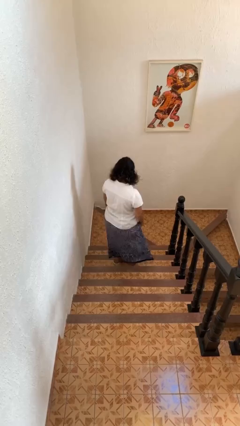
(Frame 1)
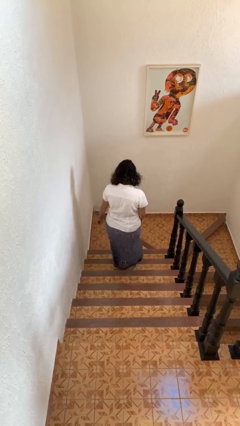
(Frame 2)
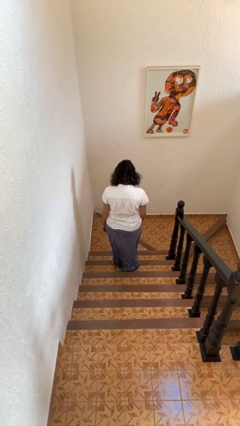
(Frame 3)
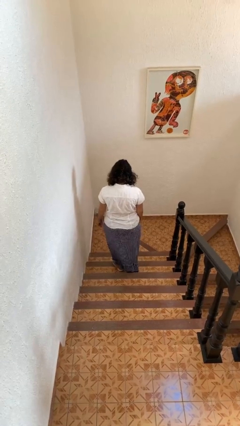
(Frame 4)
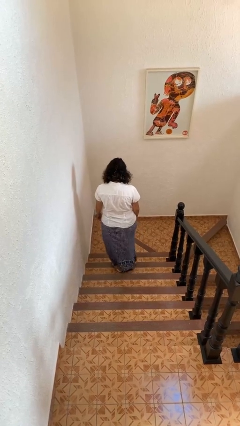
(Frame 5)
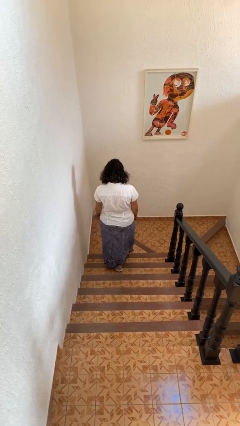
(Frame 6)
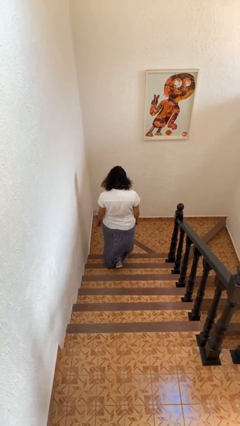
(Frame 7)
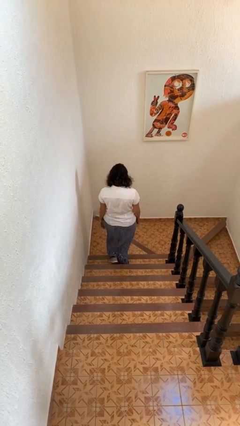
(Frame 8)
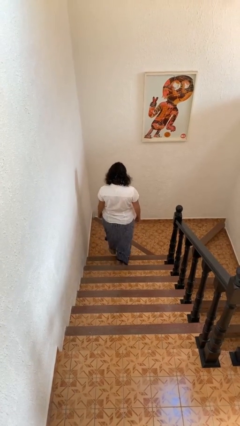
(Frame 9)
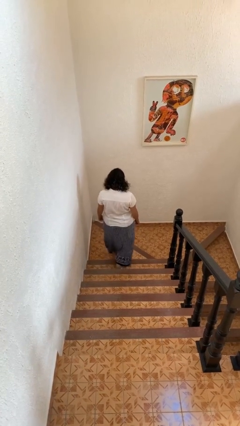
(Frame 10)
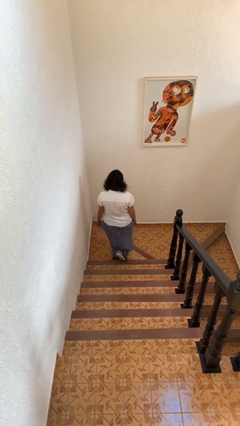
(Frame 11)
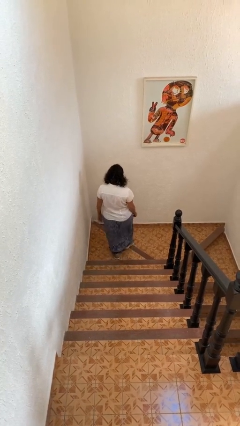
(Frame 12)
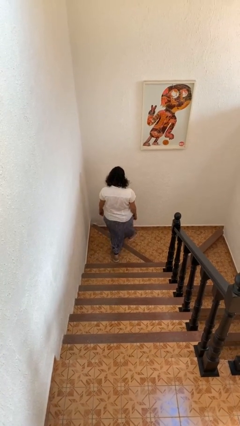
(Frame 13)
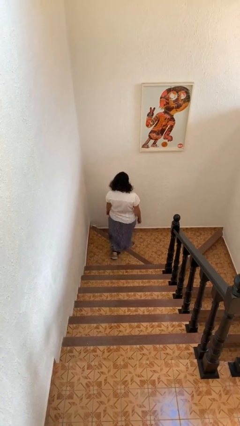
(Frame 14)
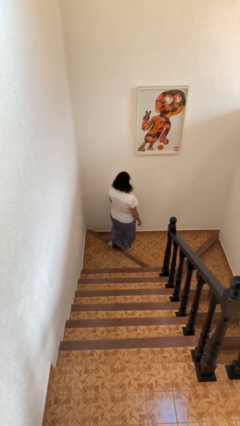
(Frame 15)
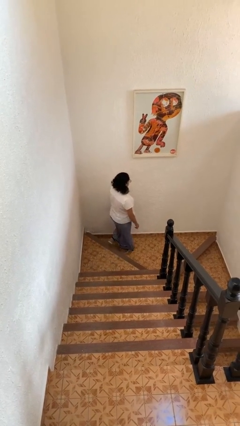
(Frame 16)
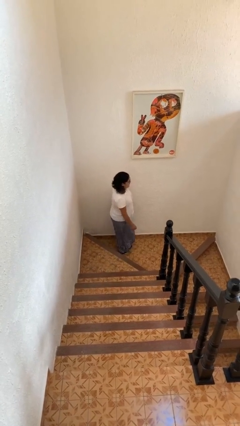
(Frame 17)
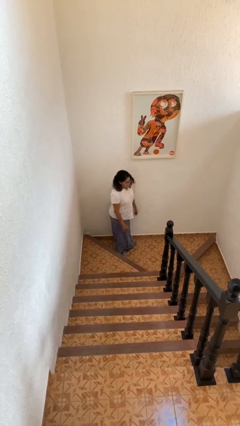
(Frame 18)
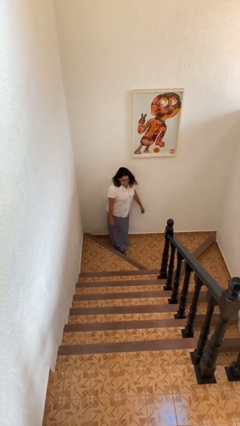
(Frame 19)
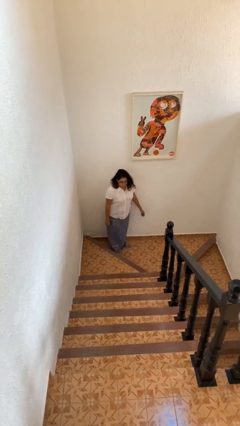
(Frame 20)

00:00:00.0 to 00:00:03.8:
person climbs down stairs

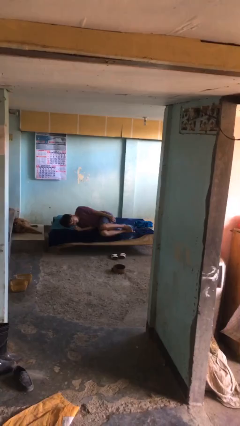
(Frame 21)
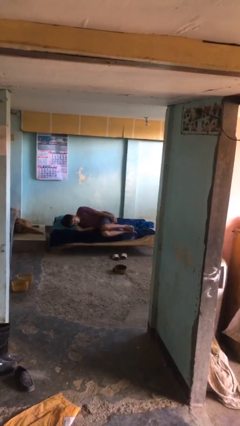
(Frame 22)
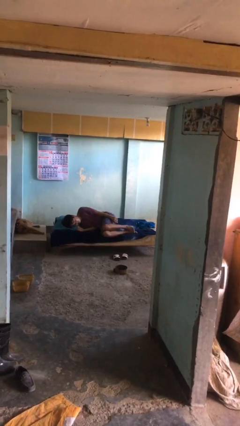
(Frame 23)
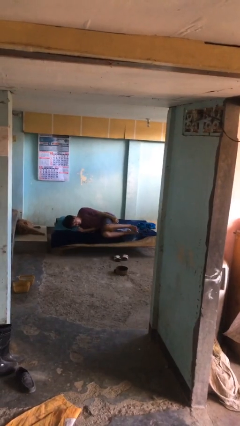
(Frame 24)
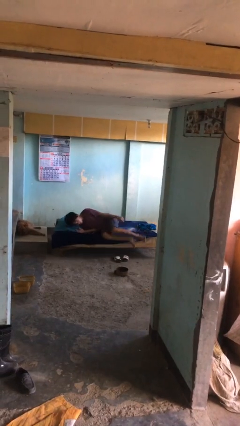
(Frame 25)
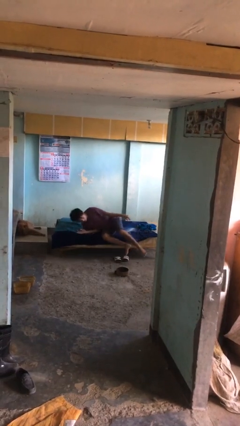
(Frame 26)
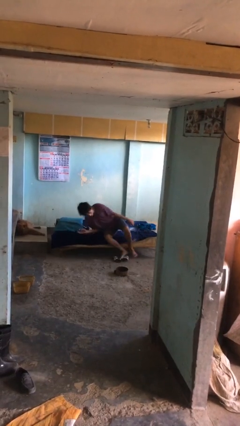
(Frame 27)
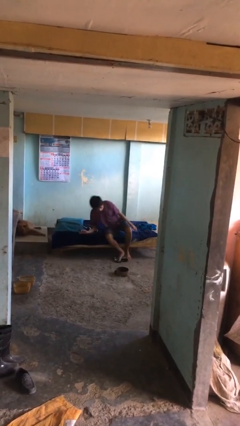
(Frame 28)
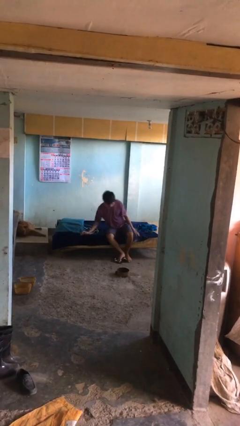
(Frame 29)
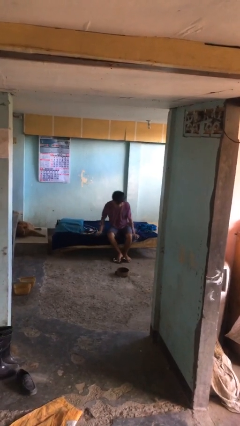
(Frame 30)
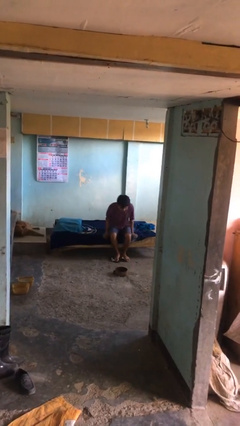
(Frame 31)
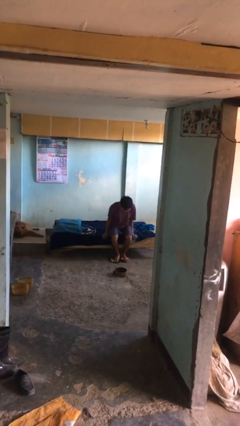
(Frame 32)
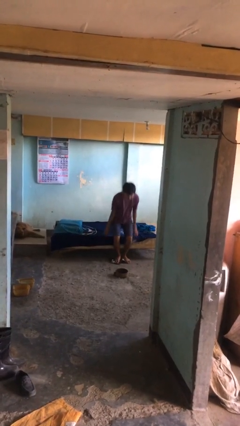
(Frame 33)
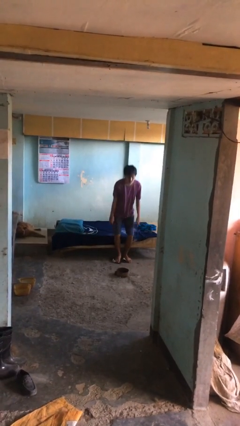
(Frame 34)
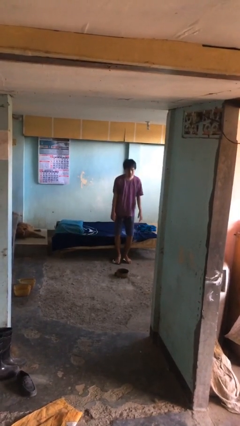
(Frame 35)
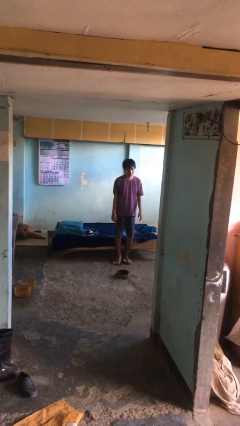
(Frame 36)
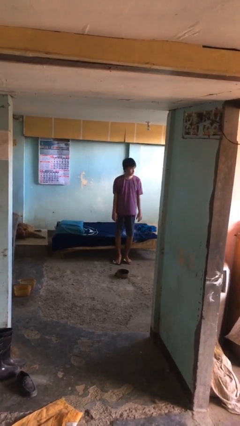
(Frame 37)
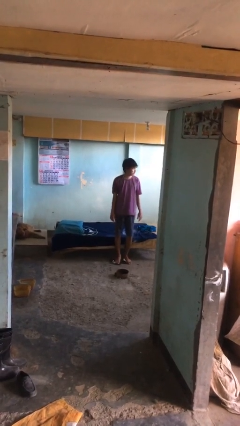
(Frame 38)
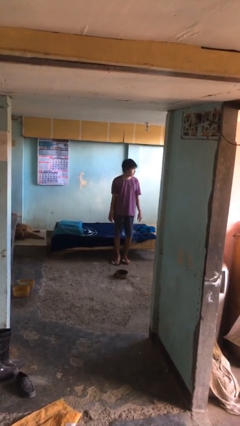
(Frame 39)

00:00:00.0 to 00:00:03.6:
person stands up

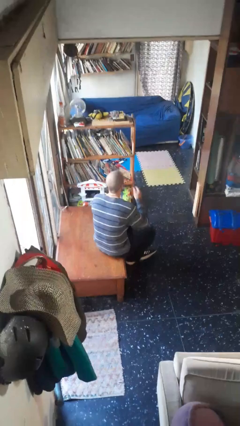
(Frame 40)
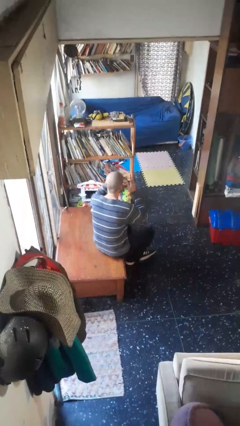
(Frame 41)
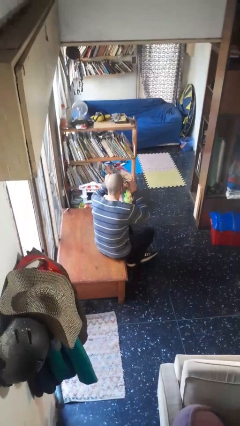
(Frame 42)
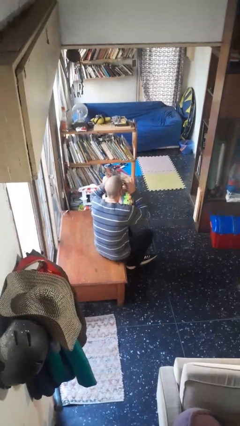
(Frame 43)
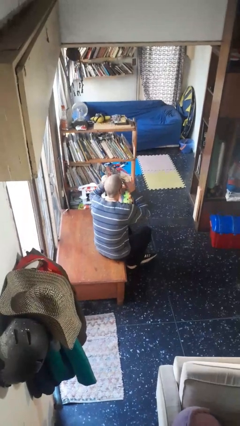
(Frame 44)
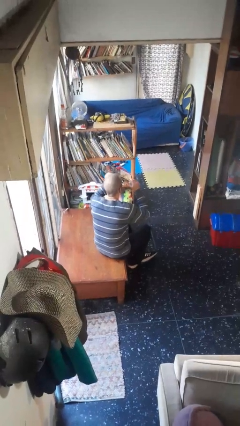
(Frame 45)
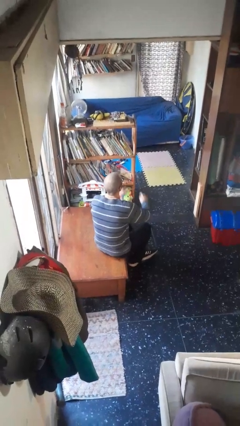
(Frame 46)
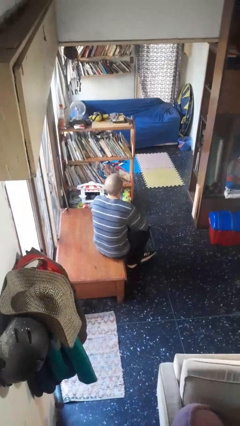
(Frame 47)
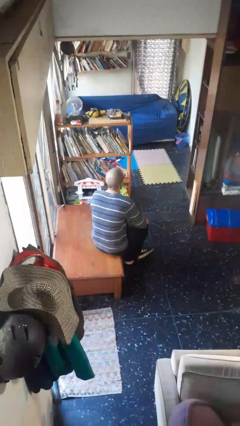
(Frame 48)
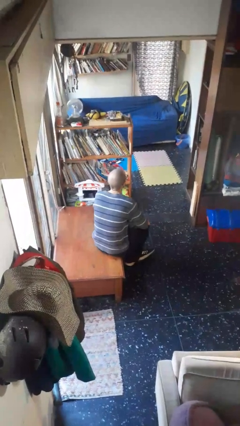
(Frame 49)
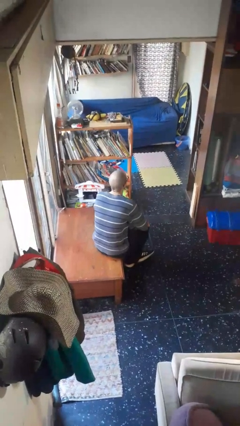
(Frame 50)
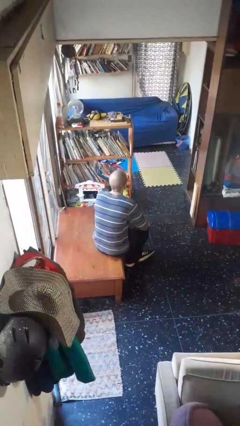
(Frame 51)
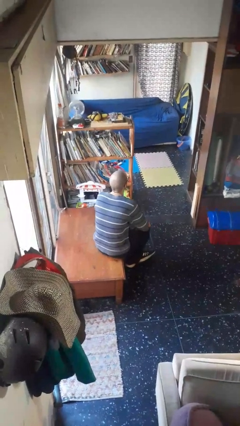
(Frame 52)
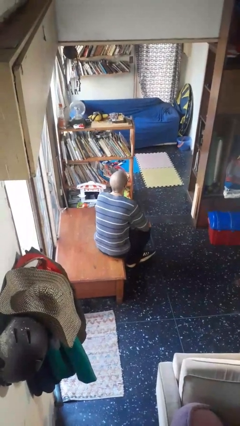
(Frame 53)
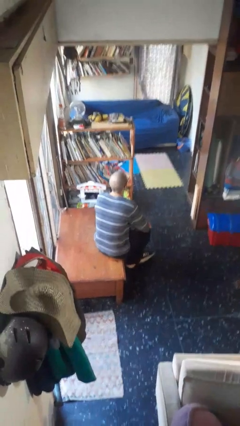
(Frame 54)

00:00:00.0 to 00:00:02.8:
person puts on glasses

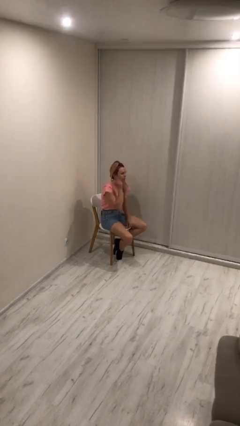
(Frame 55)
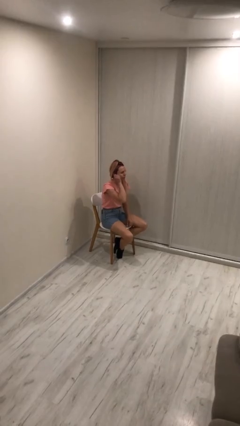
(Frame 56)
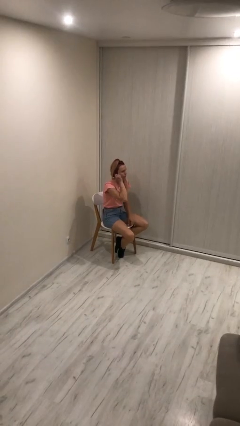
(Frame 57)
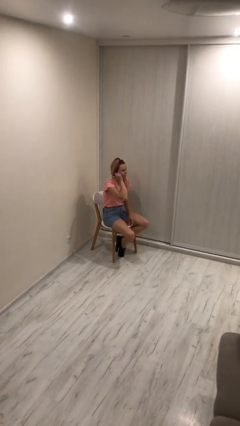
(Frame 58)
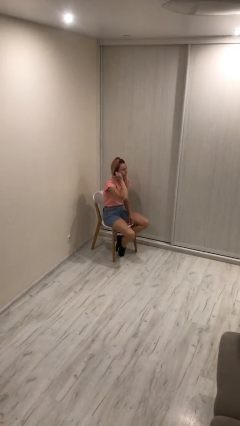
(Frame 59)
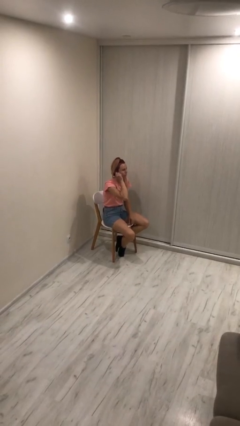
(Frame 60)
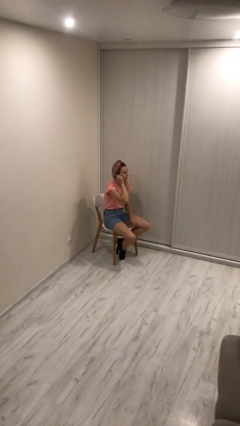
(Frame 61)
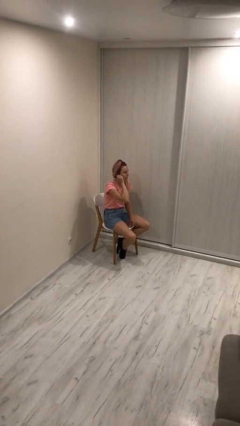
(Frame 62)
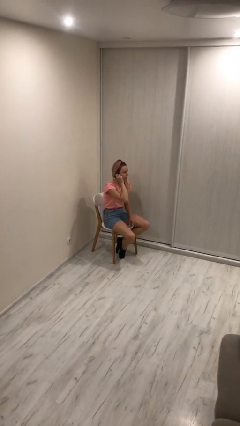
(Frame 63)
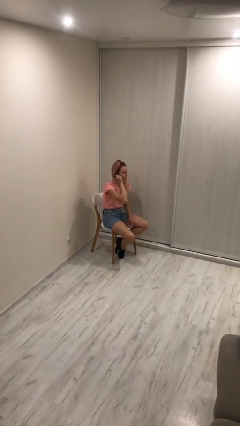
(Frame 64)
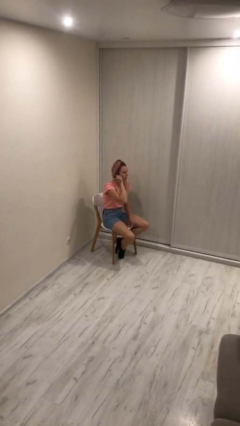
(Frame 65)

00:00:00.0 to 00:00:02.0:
person touches earlobe

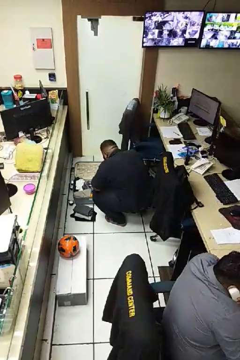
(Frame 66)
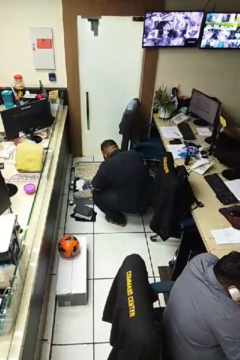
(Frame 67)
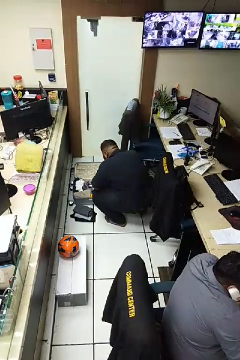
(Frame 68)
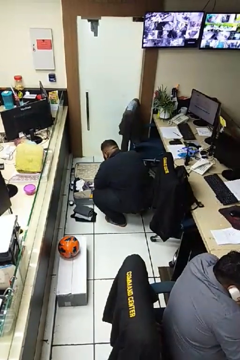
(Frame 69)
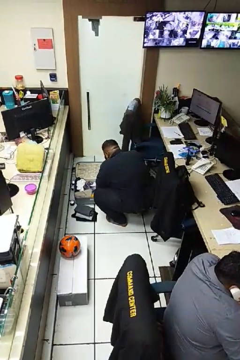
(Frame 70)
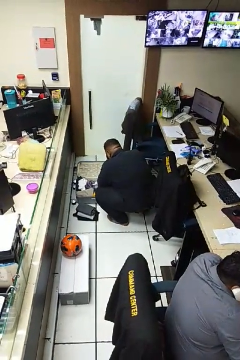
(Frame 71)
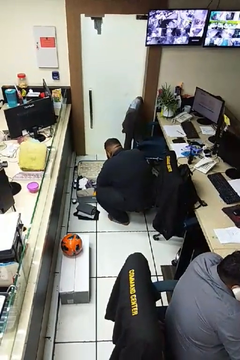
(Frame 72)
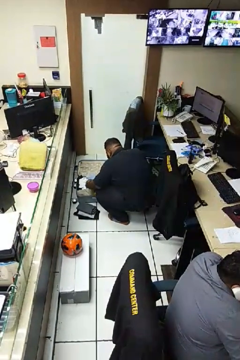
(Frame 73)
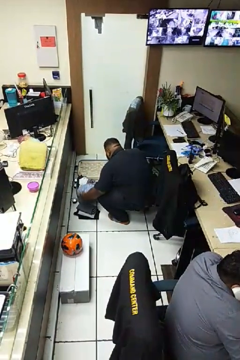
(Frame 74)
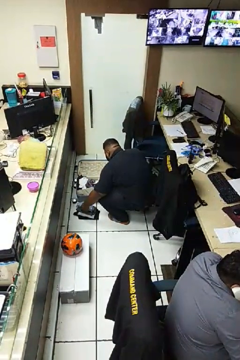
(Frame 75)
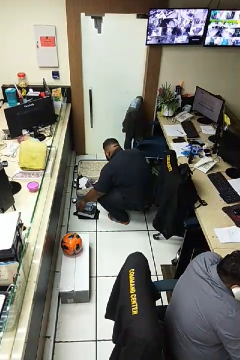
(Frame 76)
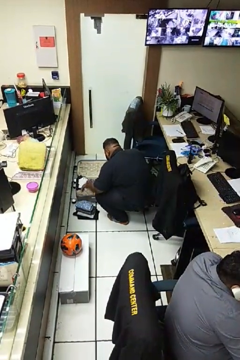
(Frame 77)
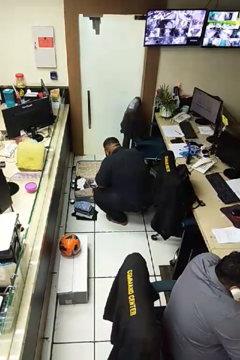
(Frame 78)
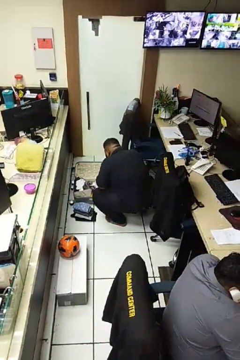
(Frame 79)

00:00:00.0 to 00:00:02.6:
person unloads clothes from suitcase

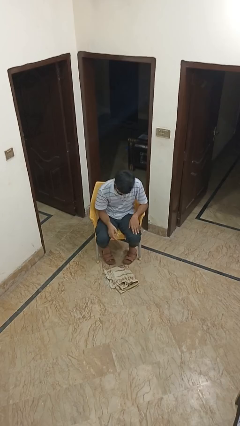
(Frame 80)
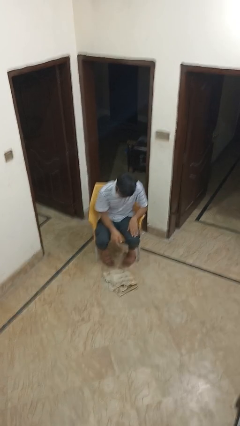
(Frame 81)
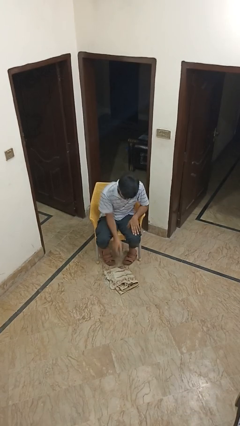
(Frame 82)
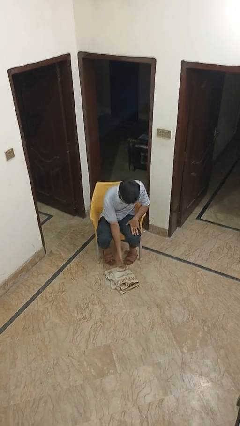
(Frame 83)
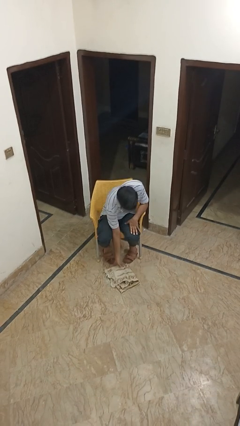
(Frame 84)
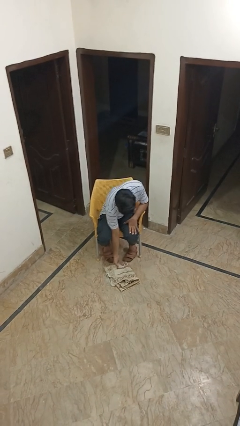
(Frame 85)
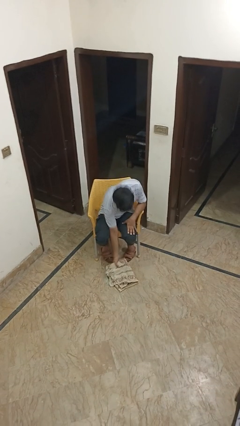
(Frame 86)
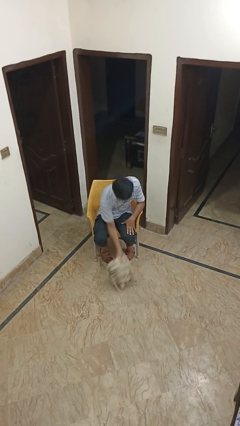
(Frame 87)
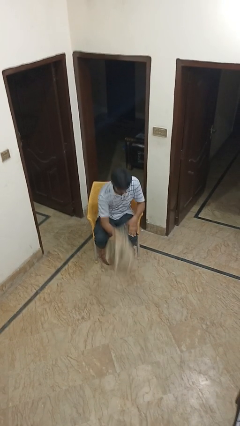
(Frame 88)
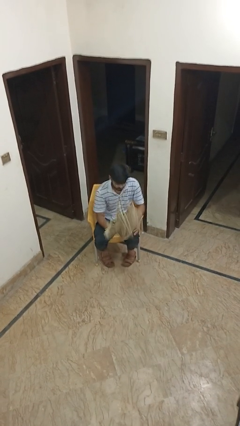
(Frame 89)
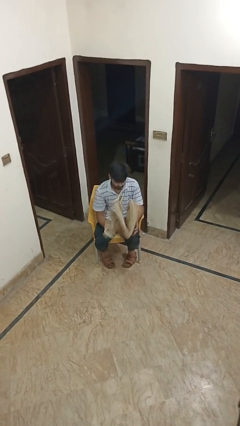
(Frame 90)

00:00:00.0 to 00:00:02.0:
person picks up object from floor

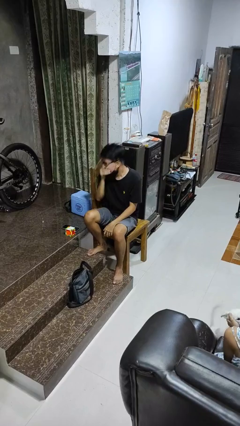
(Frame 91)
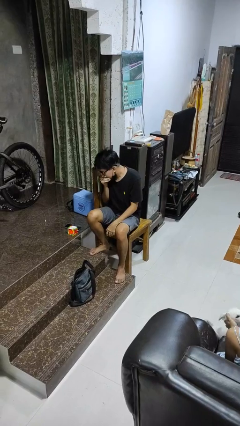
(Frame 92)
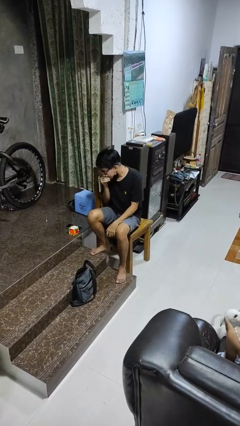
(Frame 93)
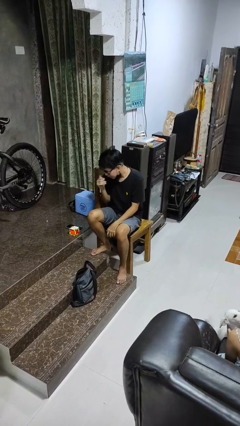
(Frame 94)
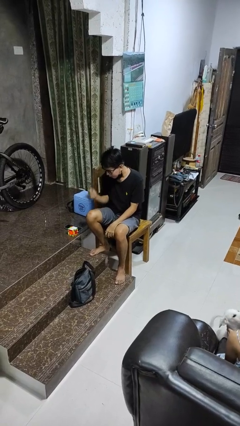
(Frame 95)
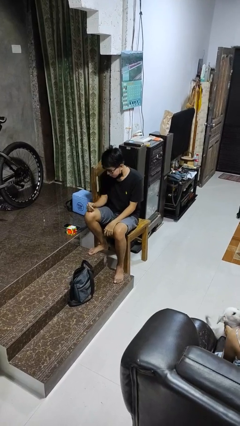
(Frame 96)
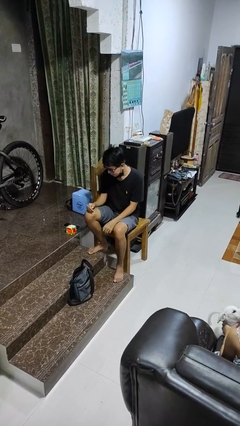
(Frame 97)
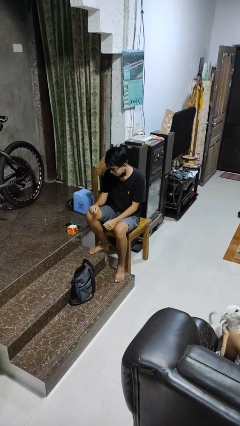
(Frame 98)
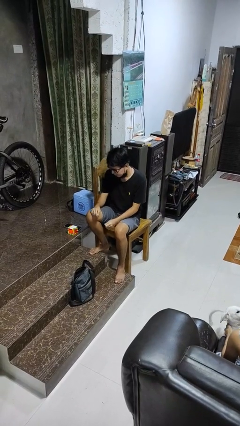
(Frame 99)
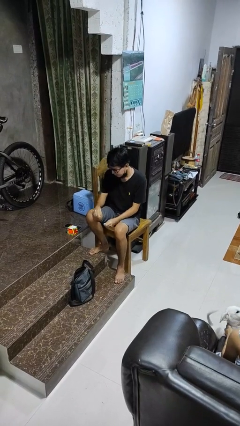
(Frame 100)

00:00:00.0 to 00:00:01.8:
person sneezes into hand
